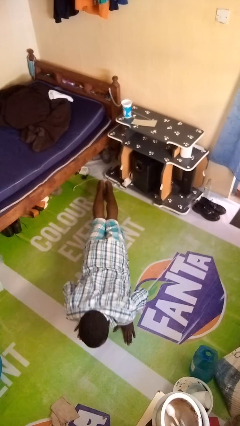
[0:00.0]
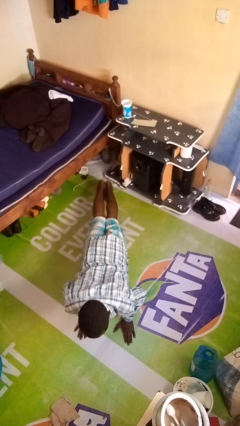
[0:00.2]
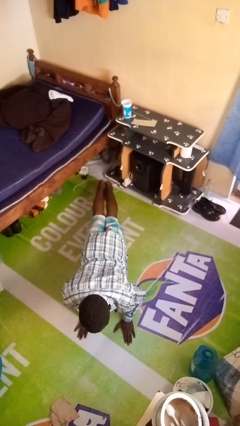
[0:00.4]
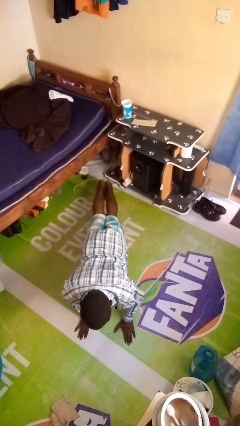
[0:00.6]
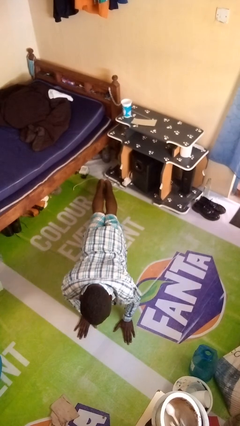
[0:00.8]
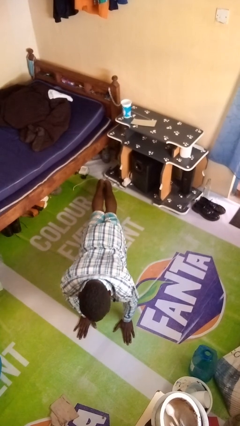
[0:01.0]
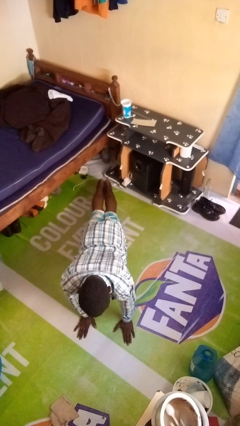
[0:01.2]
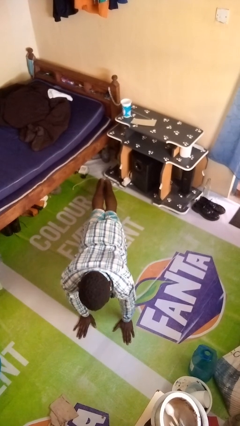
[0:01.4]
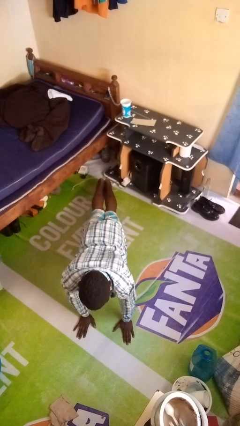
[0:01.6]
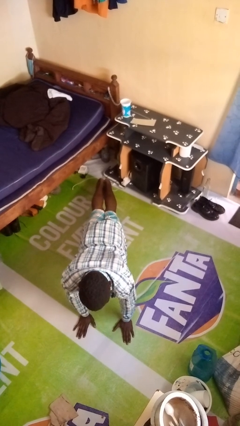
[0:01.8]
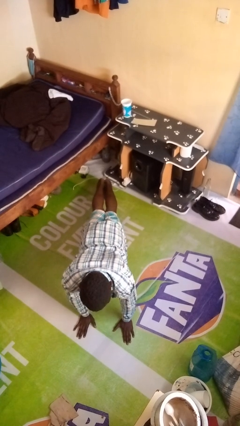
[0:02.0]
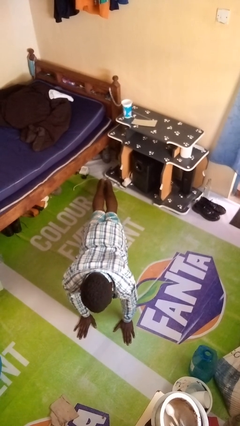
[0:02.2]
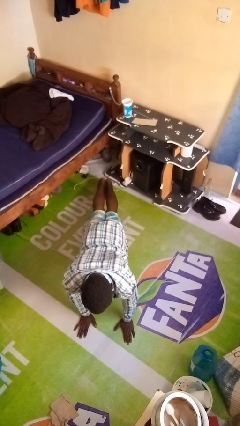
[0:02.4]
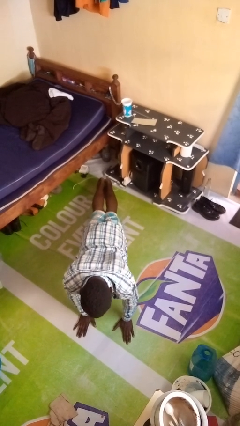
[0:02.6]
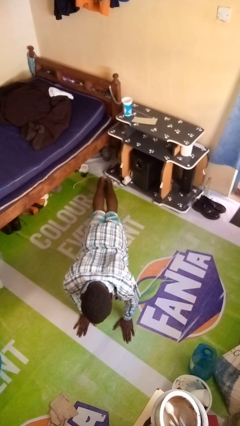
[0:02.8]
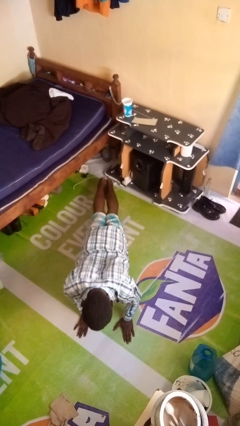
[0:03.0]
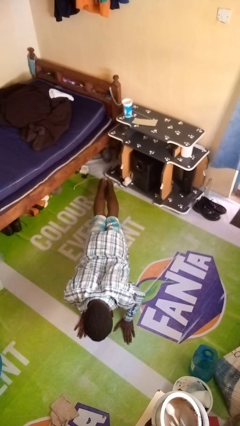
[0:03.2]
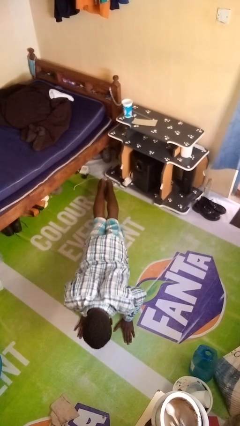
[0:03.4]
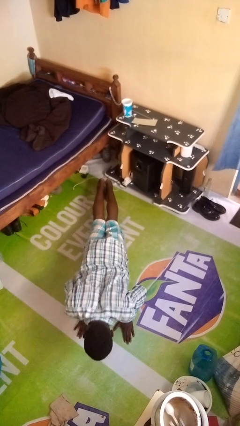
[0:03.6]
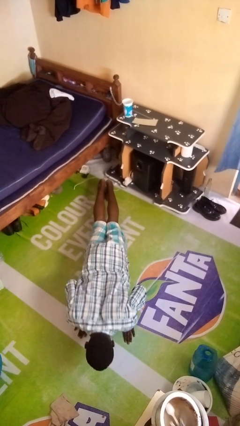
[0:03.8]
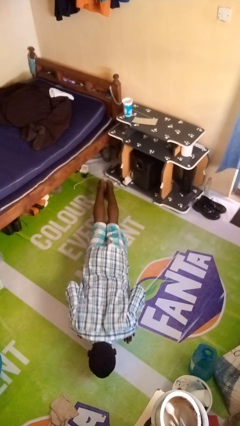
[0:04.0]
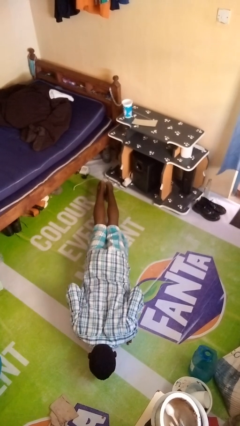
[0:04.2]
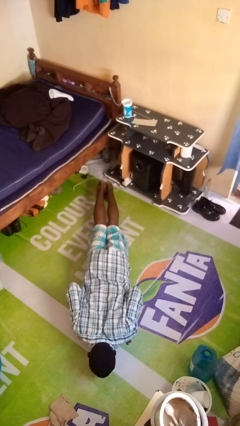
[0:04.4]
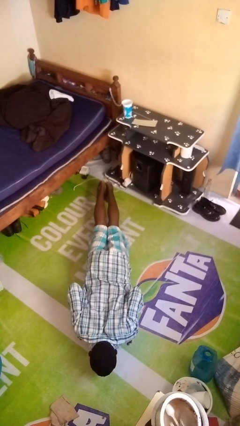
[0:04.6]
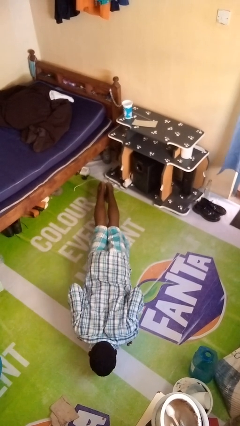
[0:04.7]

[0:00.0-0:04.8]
person exercises with pushup

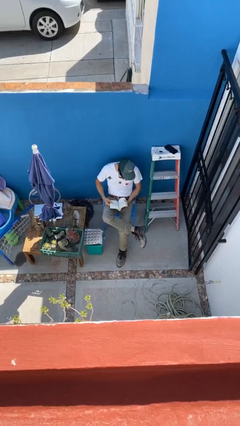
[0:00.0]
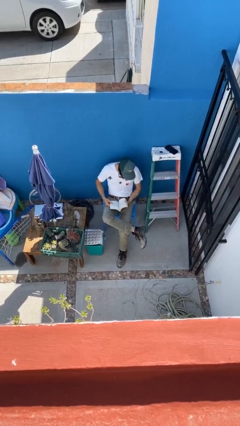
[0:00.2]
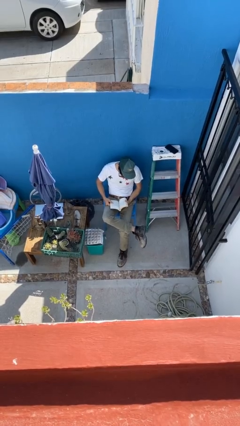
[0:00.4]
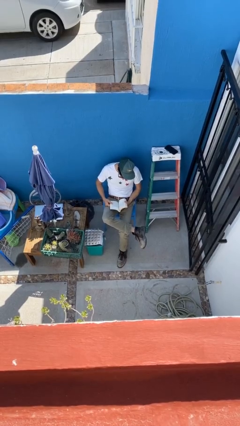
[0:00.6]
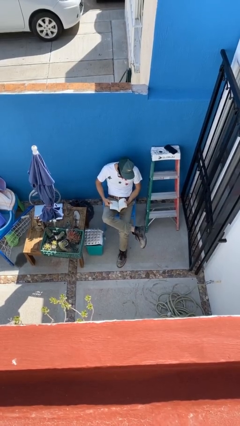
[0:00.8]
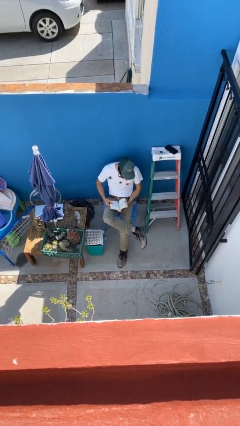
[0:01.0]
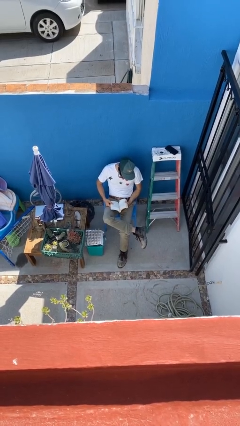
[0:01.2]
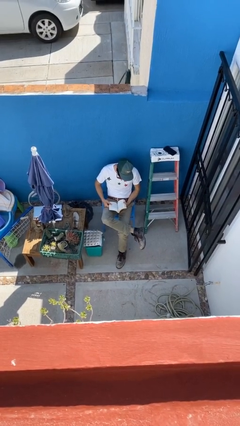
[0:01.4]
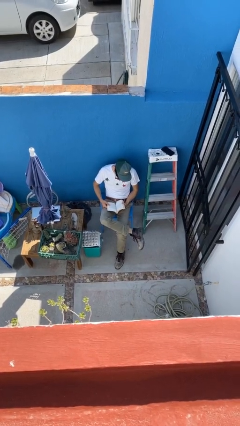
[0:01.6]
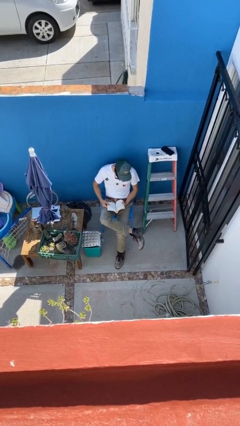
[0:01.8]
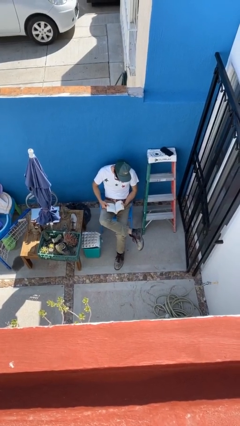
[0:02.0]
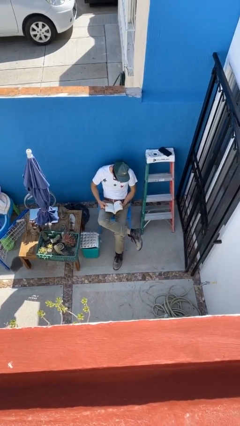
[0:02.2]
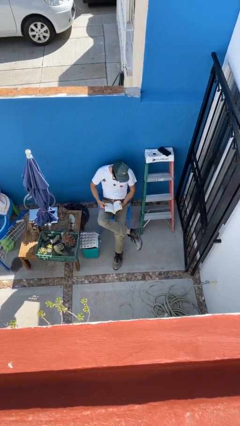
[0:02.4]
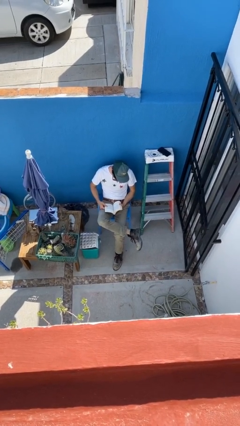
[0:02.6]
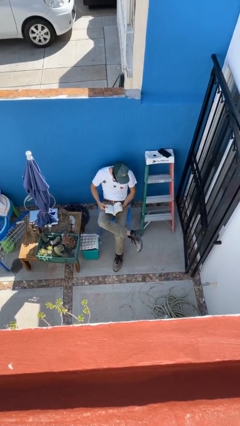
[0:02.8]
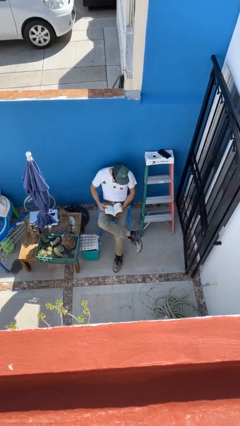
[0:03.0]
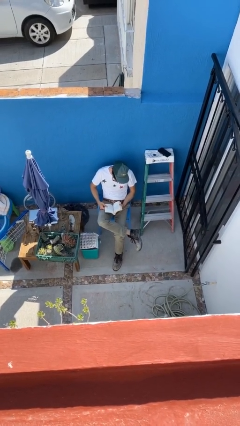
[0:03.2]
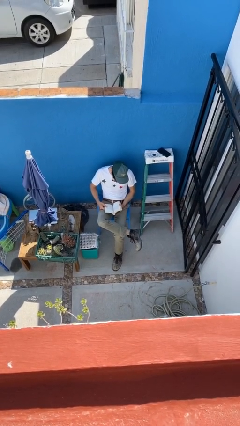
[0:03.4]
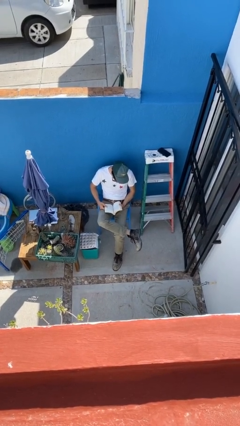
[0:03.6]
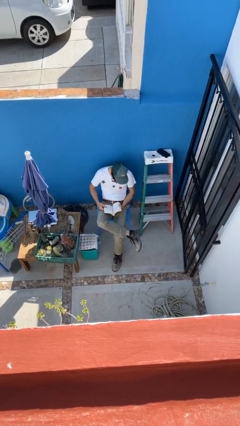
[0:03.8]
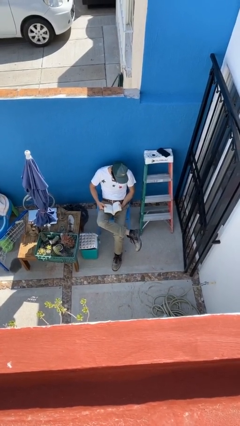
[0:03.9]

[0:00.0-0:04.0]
person reads document

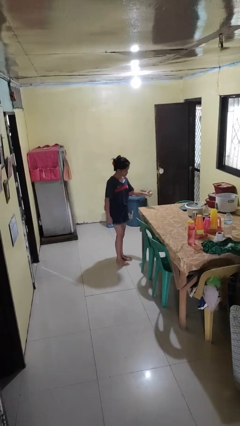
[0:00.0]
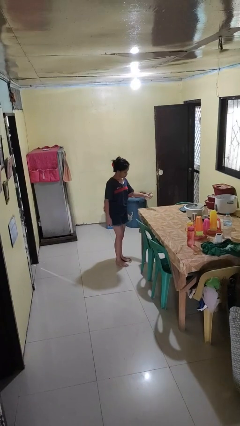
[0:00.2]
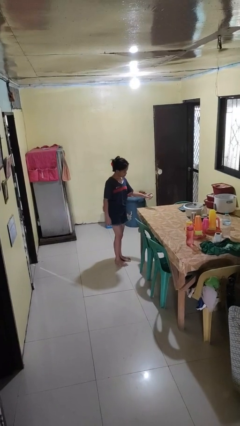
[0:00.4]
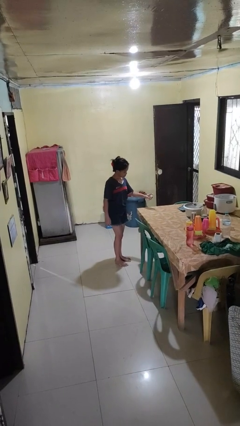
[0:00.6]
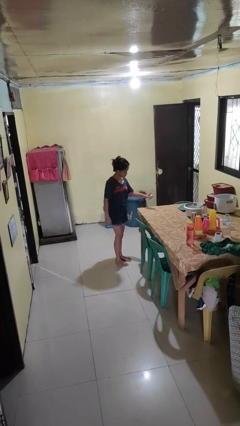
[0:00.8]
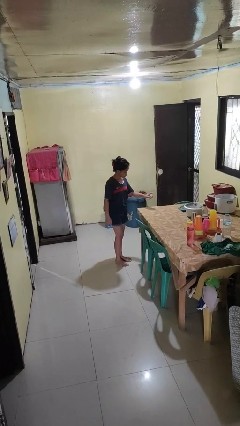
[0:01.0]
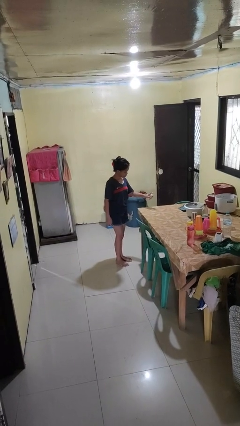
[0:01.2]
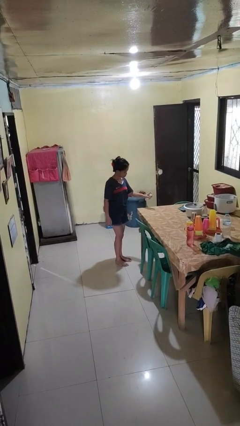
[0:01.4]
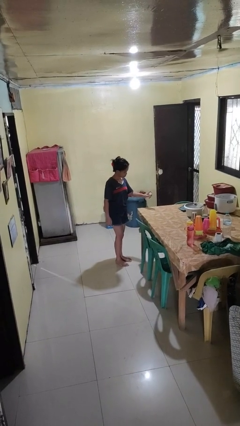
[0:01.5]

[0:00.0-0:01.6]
person sprays from bottle

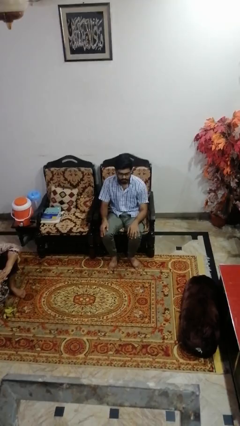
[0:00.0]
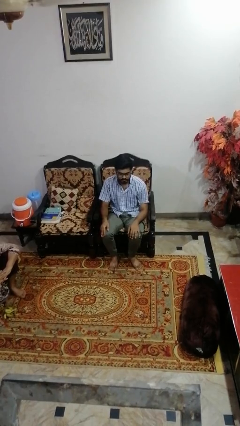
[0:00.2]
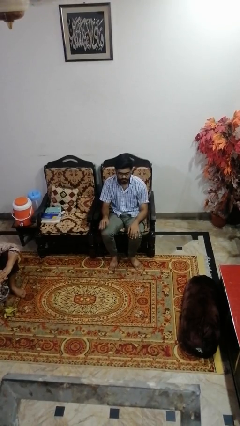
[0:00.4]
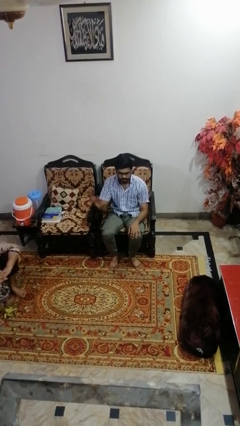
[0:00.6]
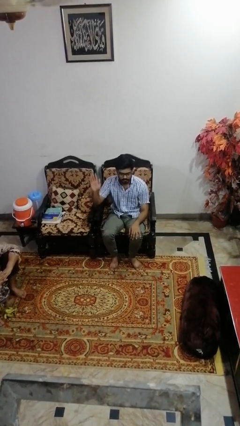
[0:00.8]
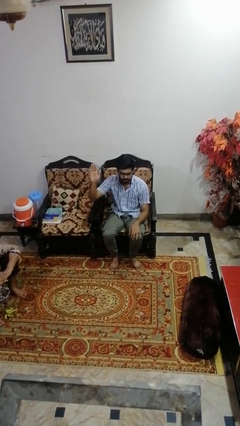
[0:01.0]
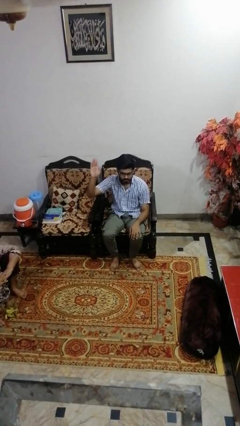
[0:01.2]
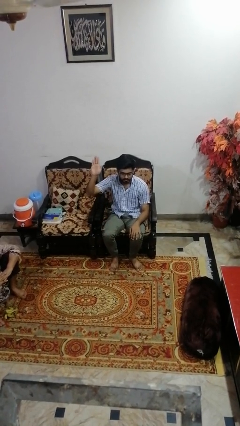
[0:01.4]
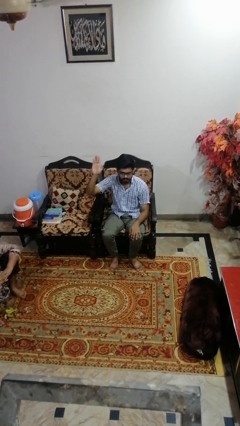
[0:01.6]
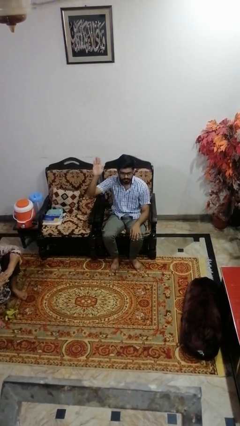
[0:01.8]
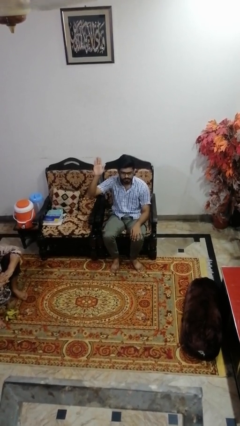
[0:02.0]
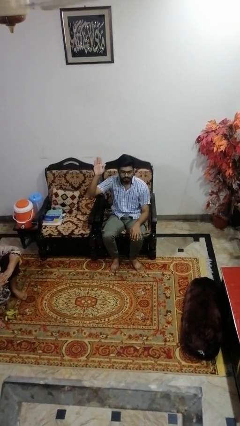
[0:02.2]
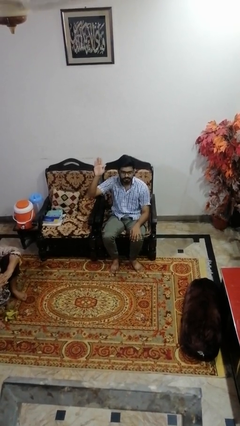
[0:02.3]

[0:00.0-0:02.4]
person gestures raise hand

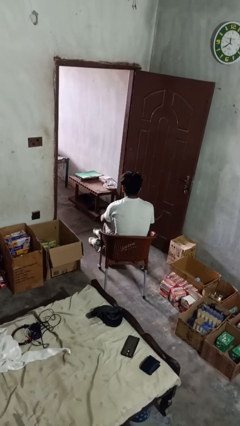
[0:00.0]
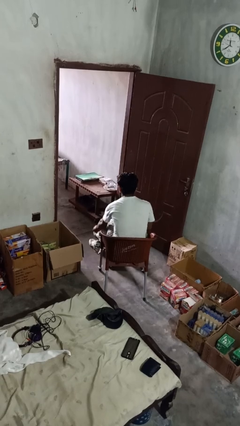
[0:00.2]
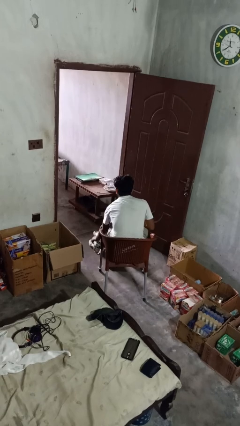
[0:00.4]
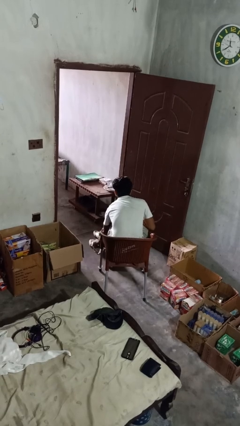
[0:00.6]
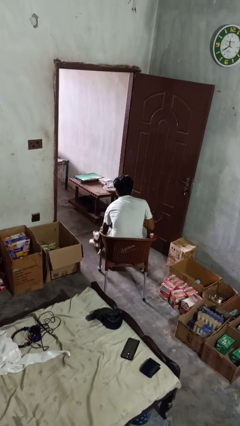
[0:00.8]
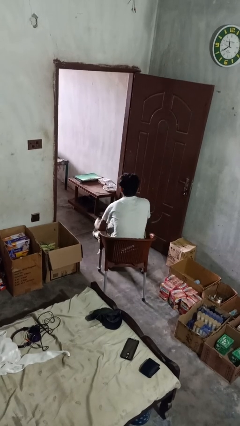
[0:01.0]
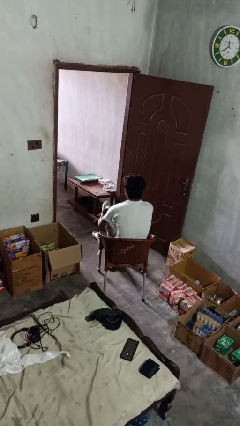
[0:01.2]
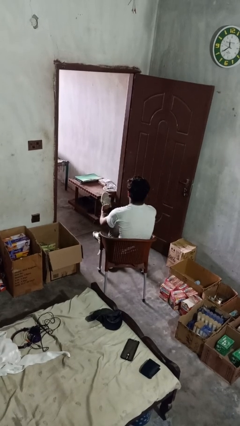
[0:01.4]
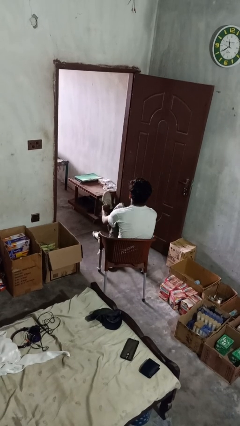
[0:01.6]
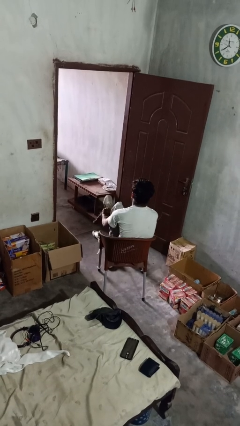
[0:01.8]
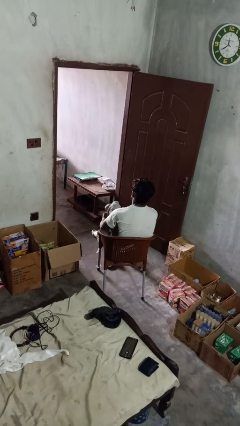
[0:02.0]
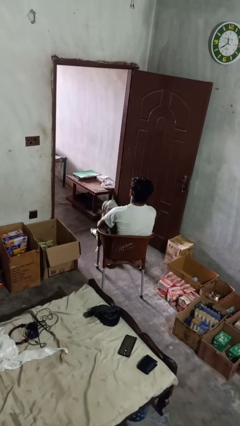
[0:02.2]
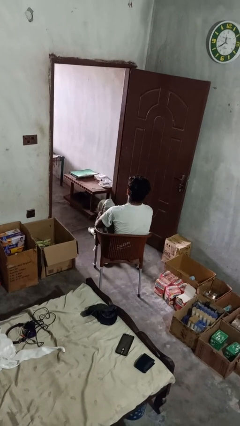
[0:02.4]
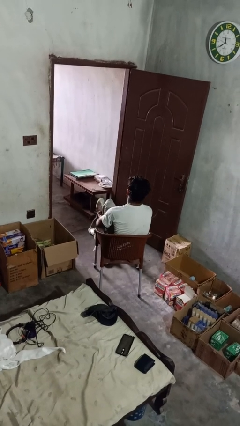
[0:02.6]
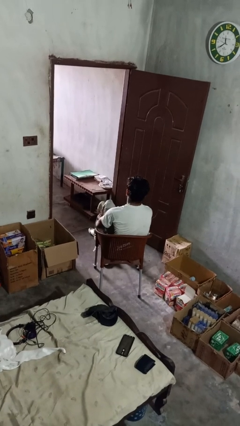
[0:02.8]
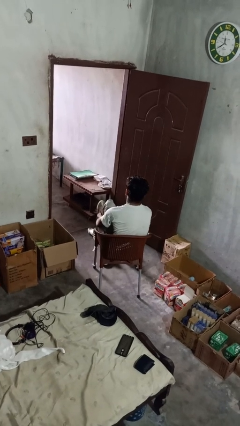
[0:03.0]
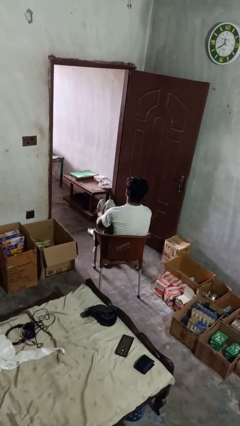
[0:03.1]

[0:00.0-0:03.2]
person puts on shoes

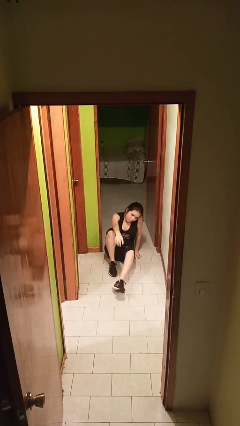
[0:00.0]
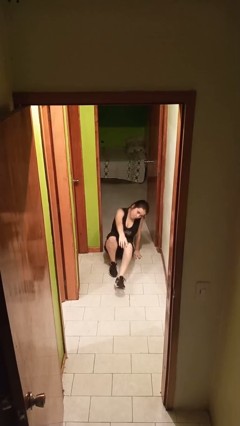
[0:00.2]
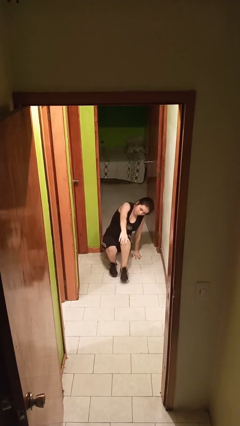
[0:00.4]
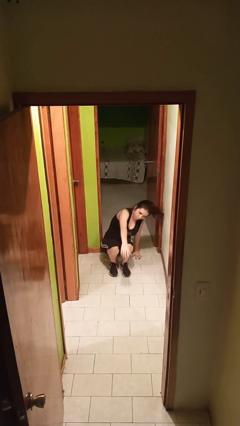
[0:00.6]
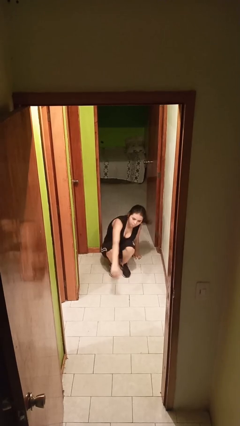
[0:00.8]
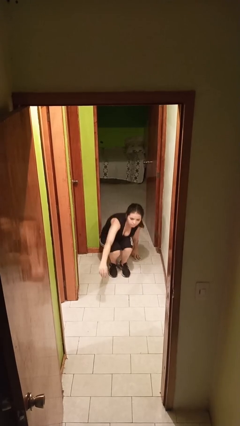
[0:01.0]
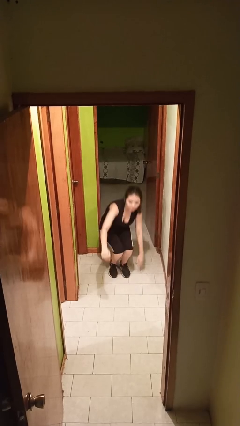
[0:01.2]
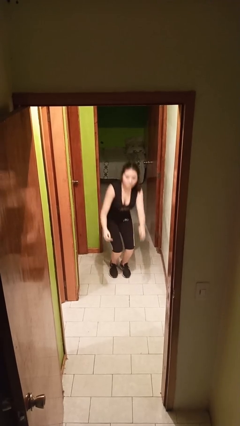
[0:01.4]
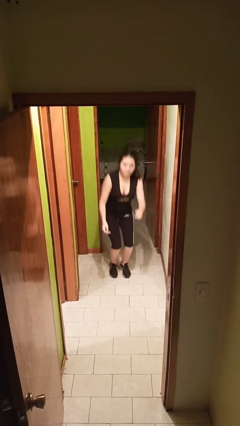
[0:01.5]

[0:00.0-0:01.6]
person stands up
